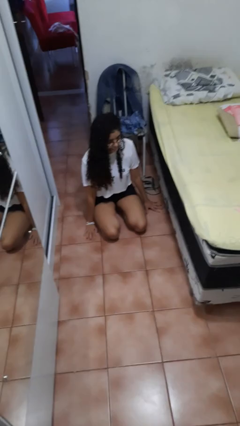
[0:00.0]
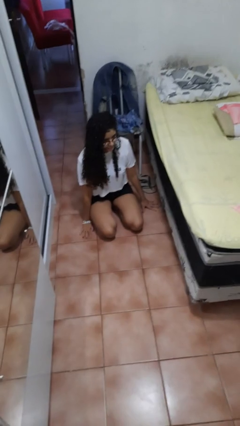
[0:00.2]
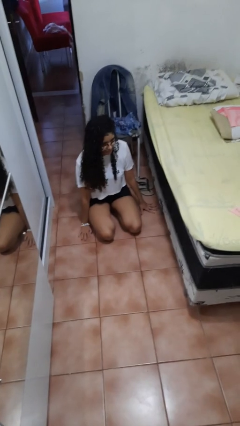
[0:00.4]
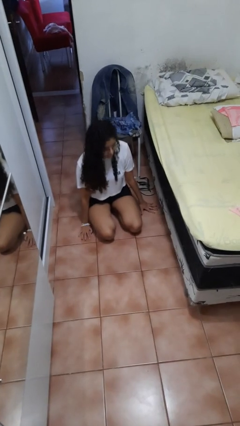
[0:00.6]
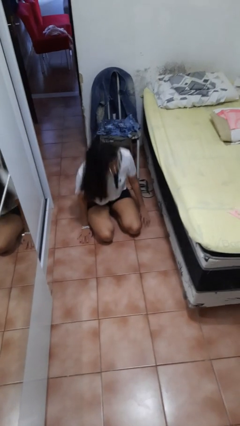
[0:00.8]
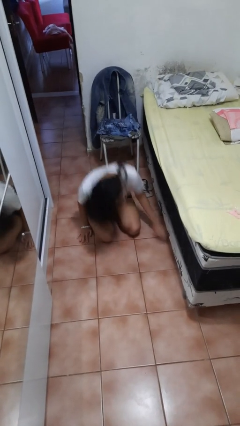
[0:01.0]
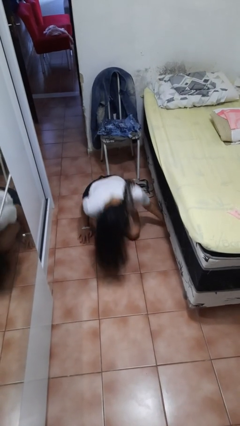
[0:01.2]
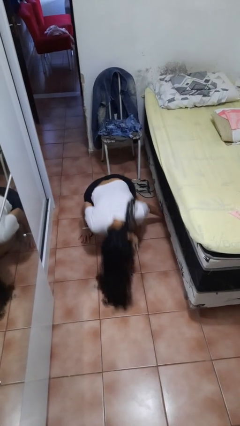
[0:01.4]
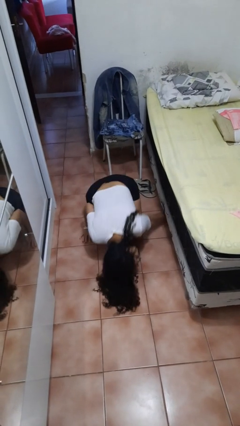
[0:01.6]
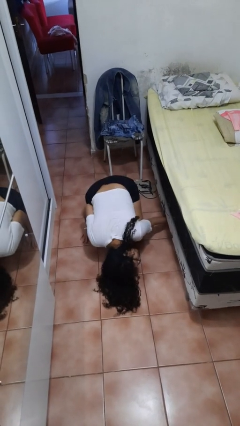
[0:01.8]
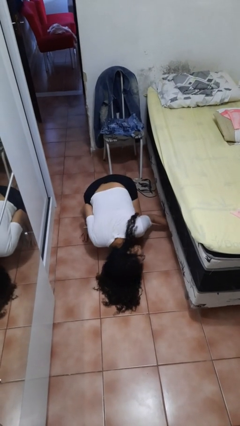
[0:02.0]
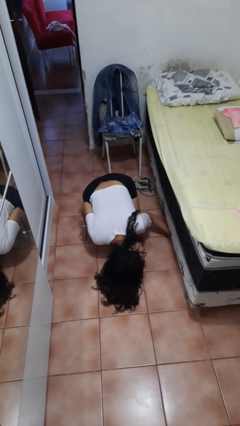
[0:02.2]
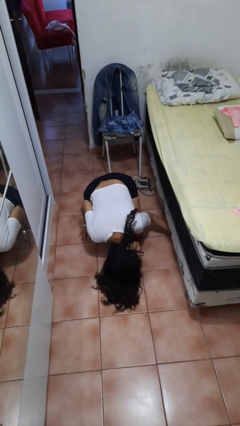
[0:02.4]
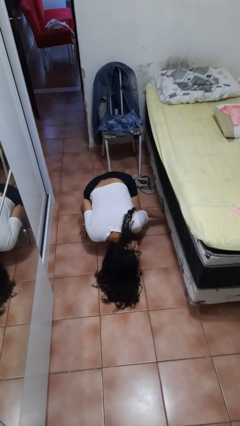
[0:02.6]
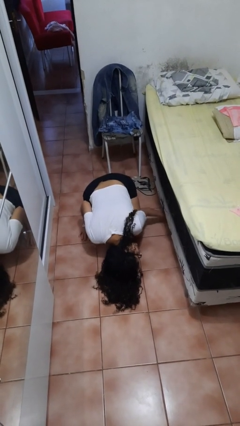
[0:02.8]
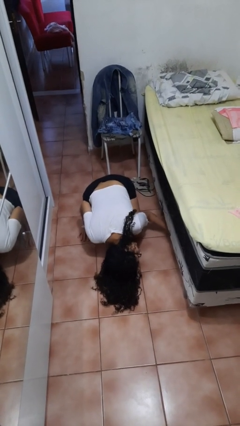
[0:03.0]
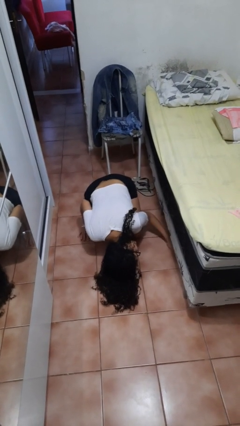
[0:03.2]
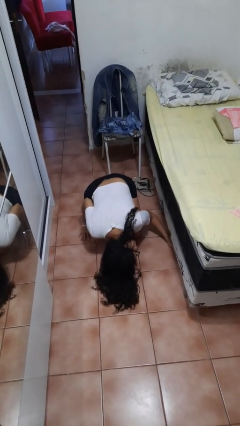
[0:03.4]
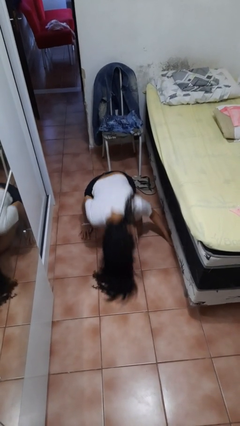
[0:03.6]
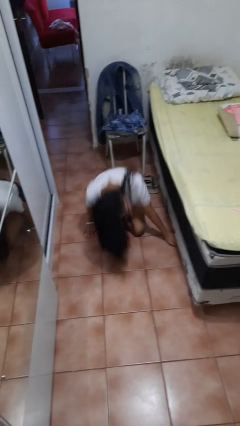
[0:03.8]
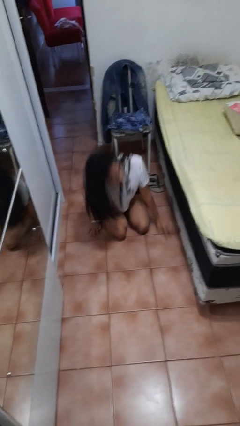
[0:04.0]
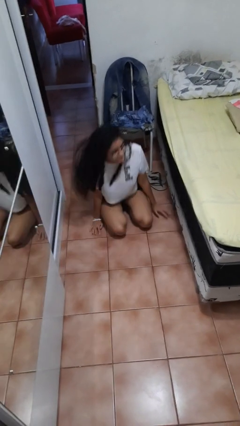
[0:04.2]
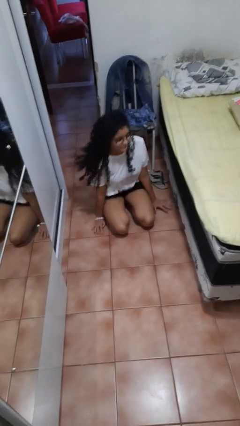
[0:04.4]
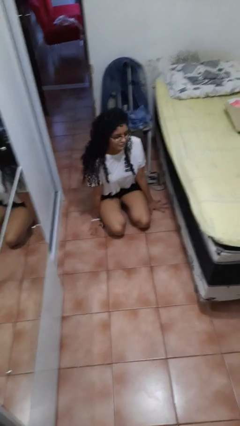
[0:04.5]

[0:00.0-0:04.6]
person searches under bed

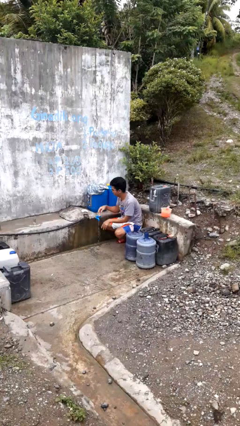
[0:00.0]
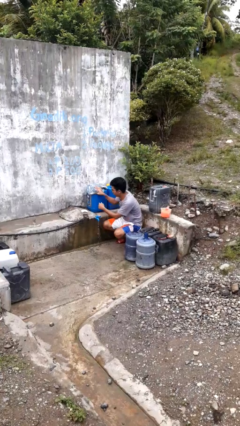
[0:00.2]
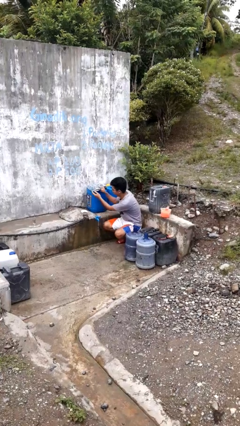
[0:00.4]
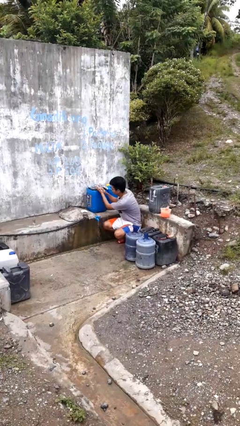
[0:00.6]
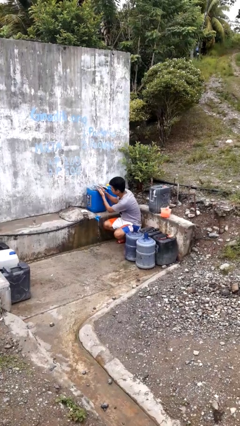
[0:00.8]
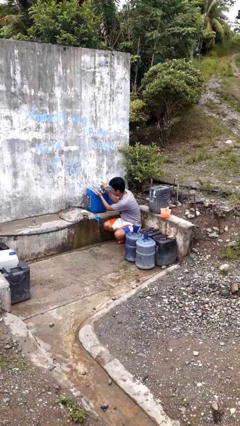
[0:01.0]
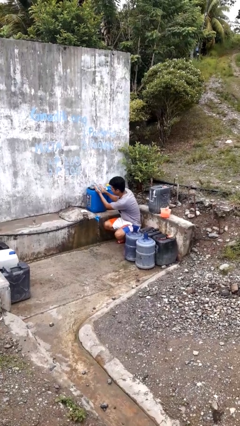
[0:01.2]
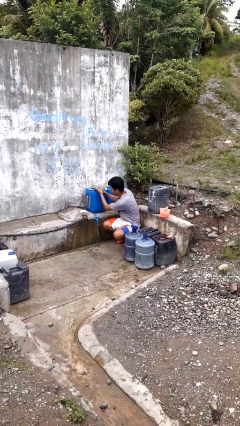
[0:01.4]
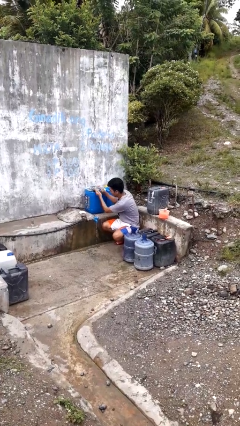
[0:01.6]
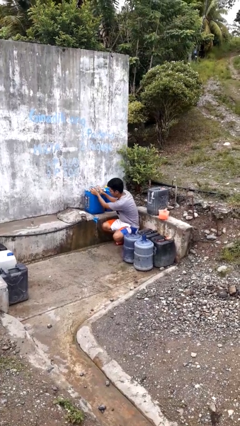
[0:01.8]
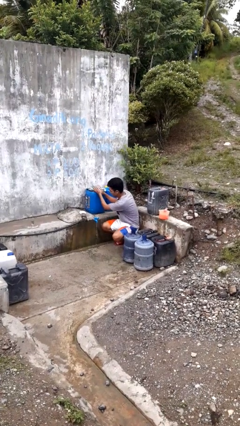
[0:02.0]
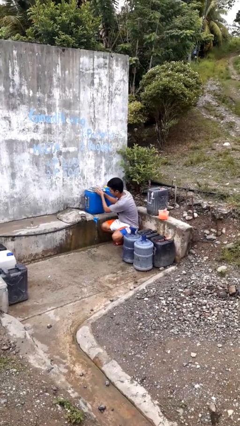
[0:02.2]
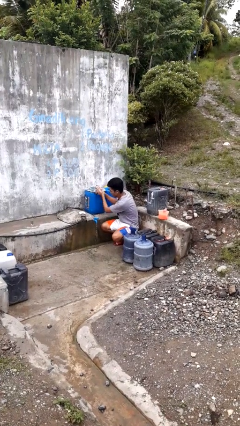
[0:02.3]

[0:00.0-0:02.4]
person dries hands with towel

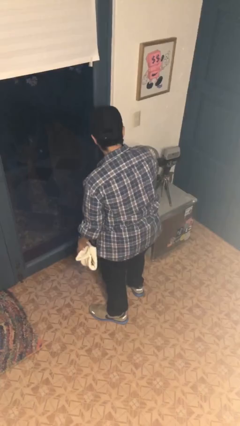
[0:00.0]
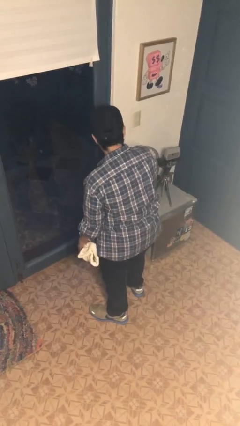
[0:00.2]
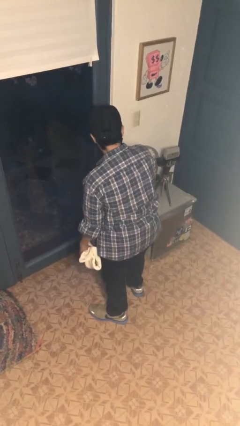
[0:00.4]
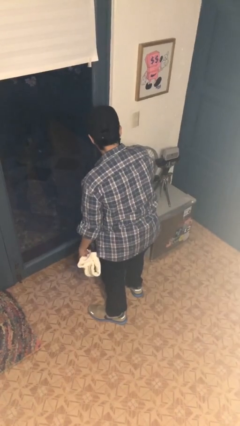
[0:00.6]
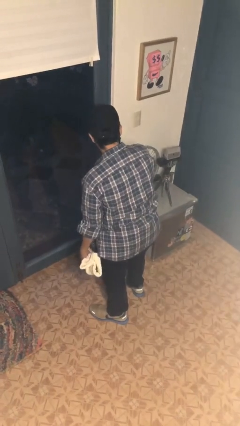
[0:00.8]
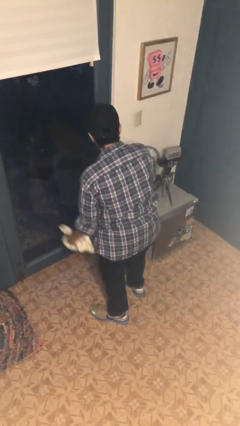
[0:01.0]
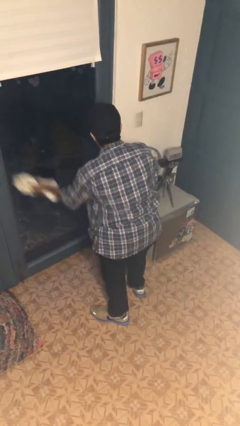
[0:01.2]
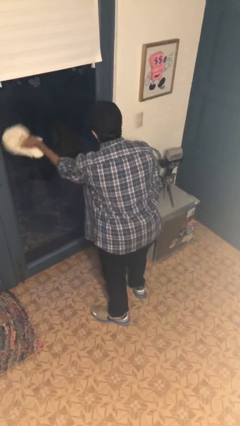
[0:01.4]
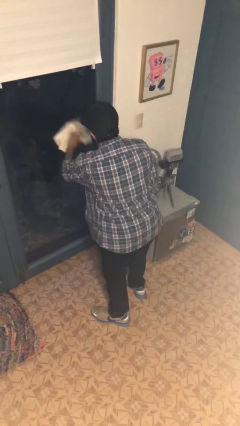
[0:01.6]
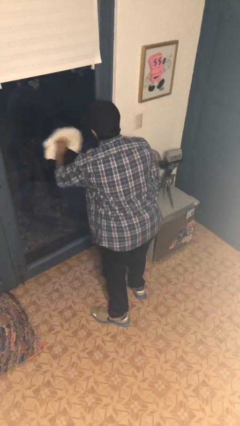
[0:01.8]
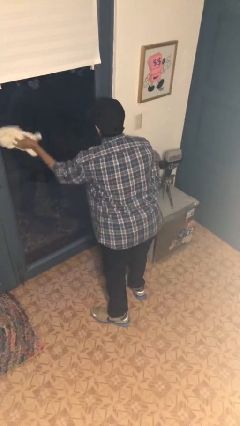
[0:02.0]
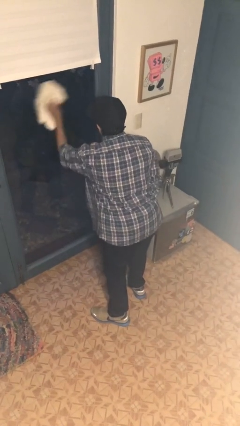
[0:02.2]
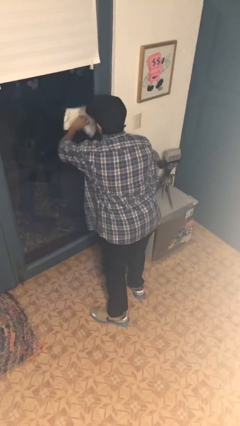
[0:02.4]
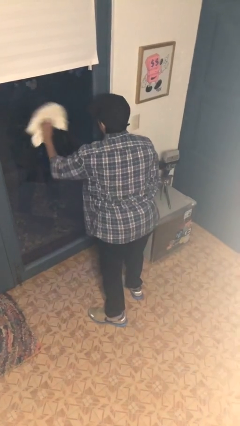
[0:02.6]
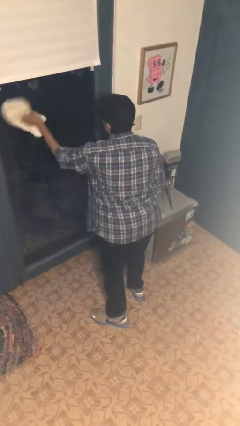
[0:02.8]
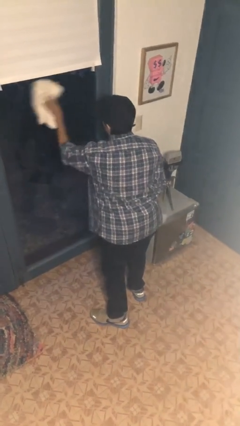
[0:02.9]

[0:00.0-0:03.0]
person washes window

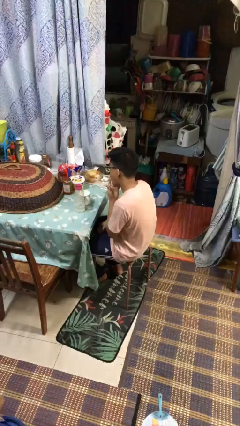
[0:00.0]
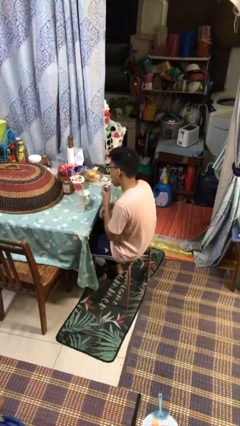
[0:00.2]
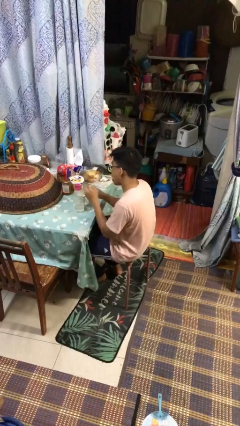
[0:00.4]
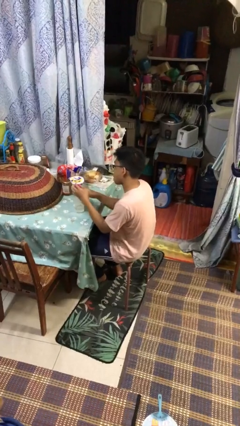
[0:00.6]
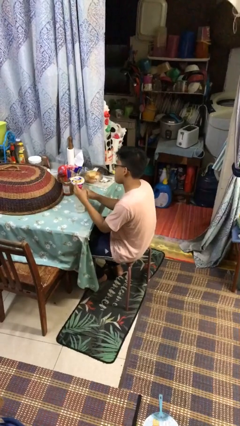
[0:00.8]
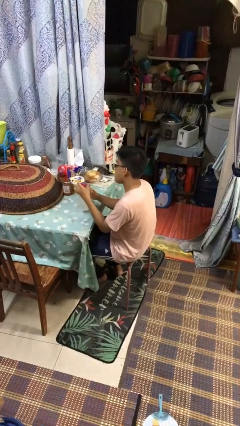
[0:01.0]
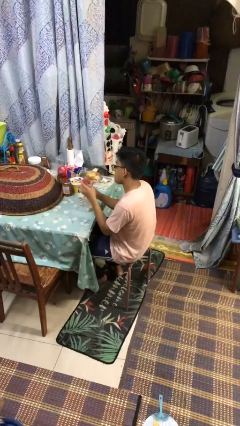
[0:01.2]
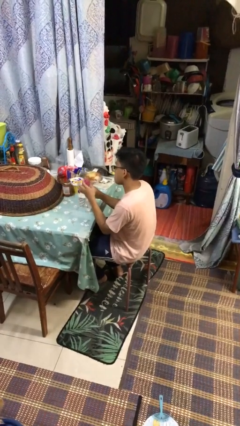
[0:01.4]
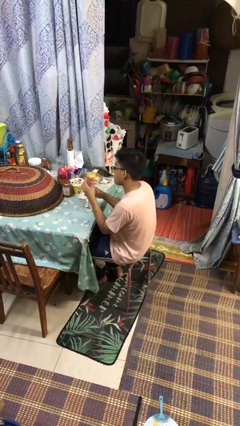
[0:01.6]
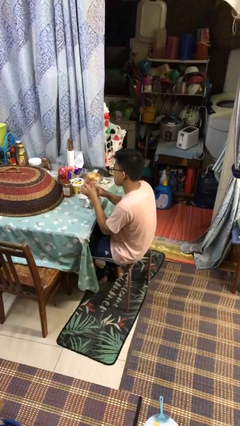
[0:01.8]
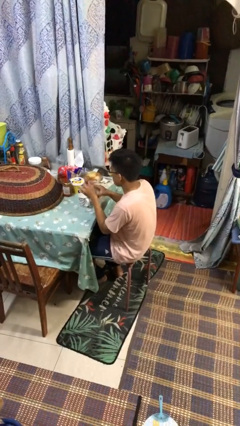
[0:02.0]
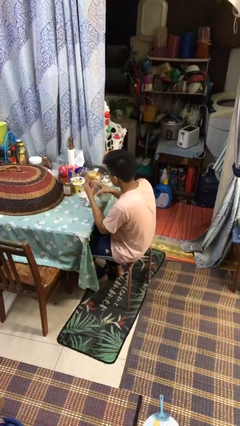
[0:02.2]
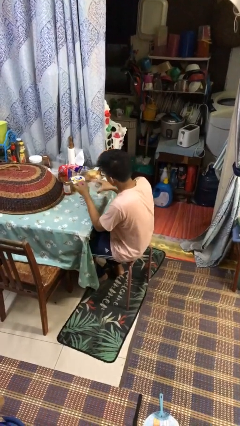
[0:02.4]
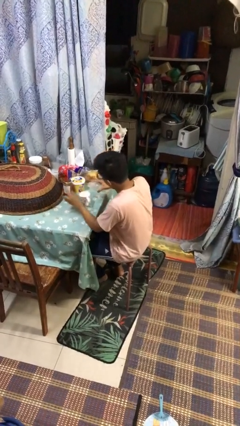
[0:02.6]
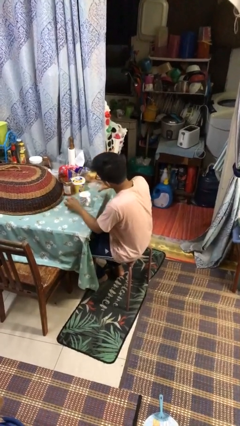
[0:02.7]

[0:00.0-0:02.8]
person unscrews lid from bottle

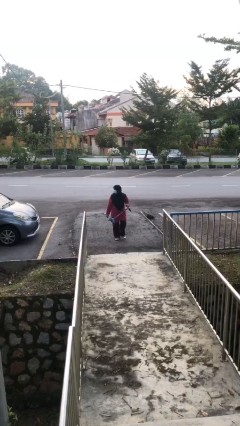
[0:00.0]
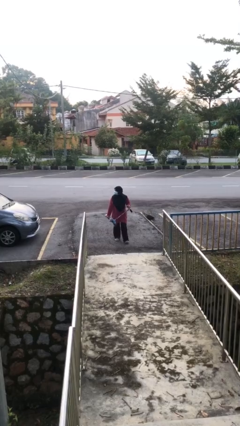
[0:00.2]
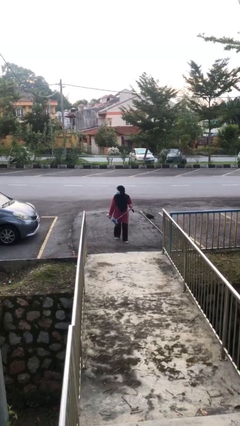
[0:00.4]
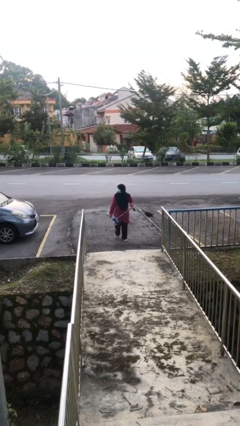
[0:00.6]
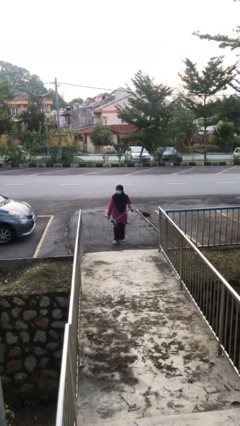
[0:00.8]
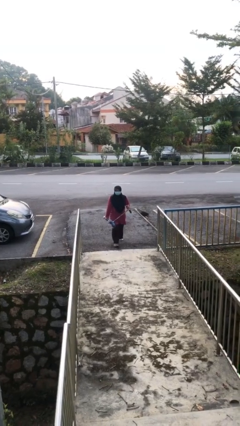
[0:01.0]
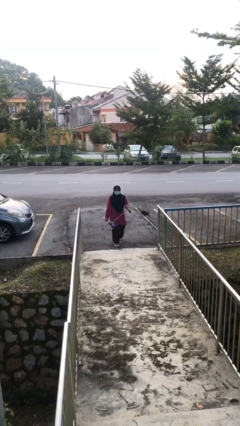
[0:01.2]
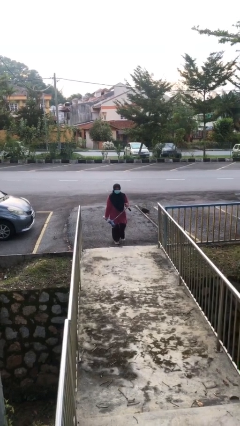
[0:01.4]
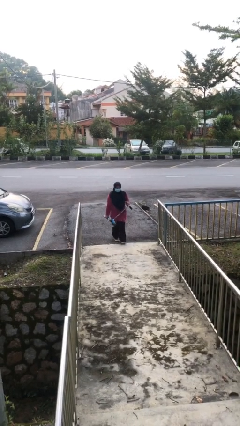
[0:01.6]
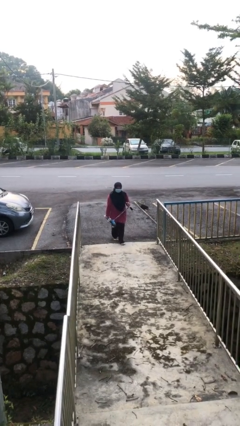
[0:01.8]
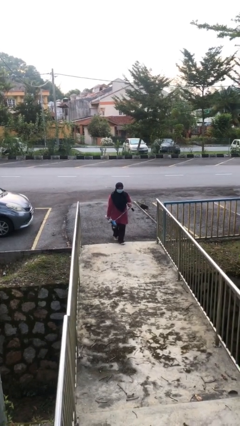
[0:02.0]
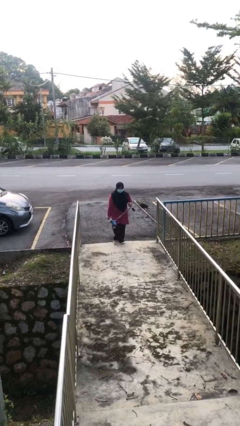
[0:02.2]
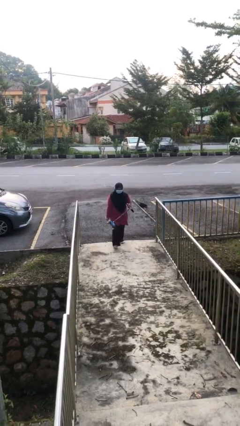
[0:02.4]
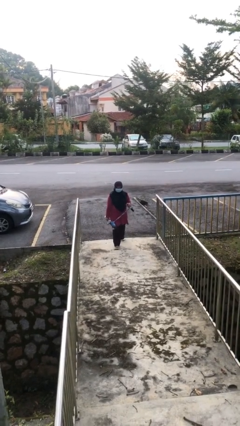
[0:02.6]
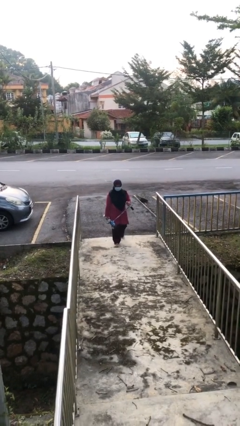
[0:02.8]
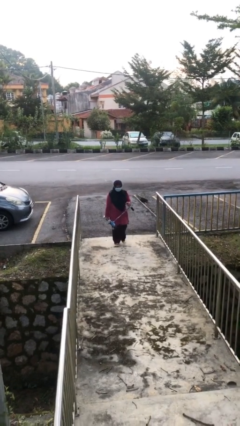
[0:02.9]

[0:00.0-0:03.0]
person carries heavy object

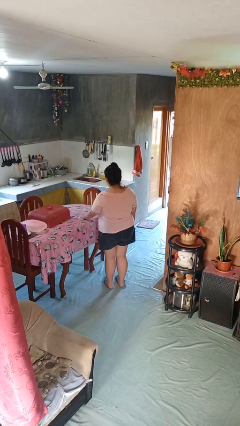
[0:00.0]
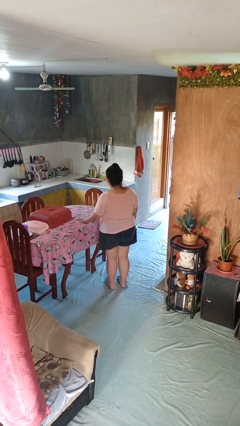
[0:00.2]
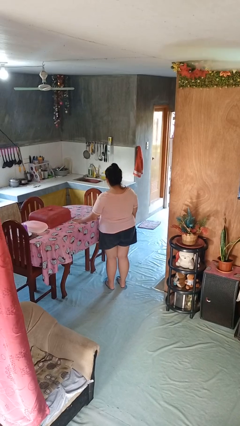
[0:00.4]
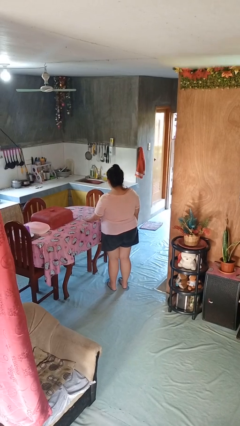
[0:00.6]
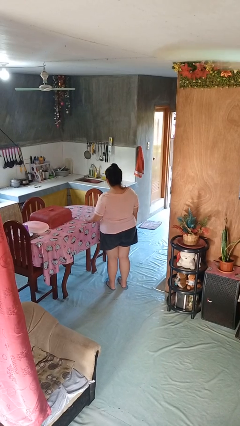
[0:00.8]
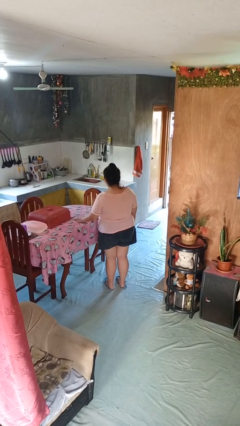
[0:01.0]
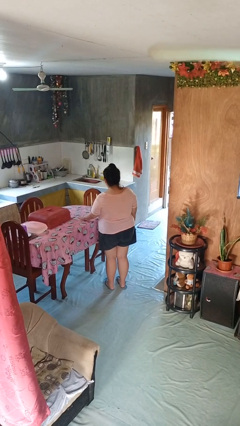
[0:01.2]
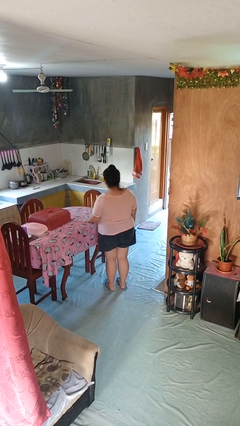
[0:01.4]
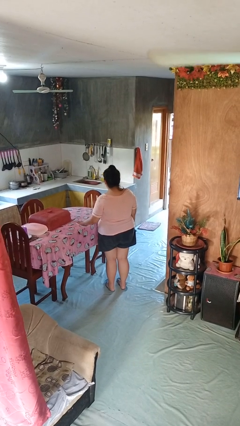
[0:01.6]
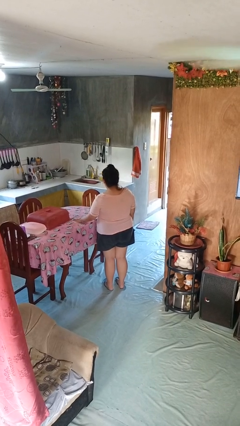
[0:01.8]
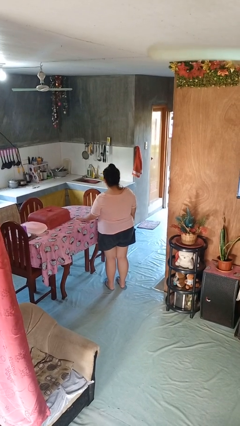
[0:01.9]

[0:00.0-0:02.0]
person cleans table with rag
